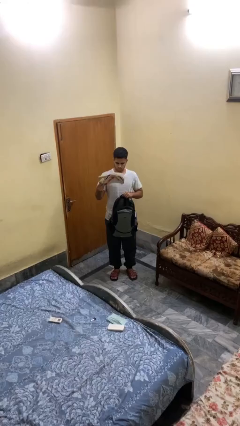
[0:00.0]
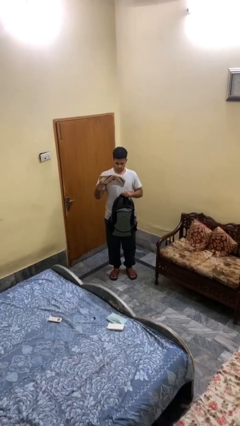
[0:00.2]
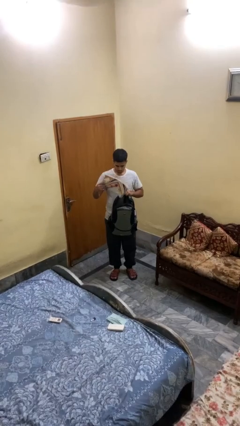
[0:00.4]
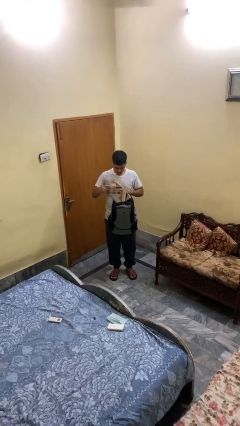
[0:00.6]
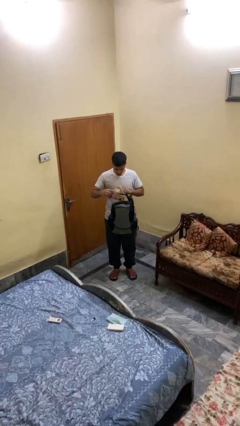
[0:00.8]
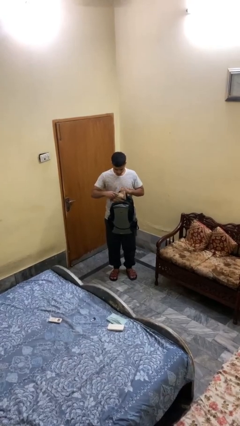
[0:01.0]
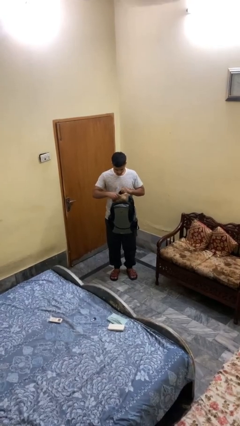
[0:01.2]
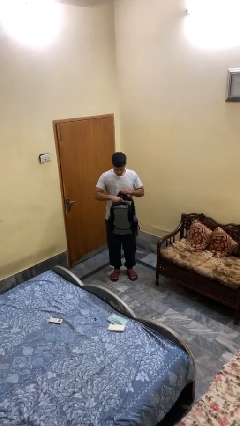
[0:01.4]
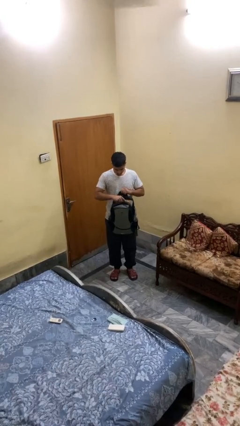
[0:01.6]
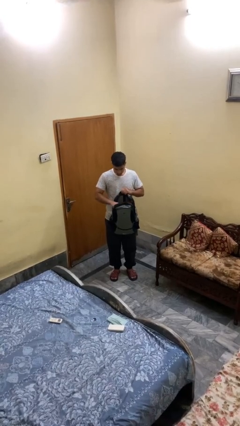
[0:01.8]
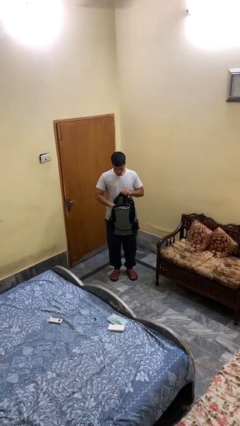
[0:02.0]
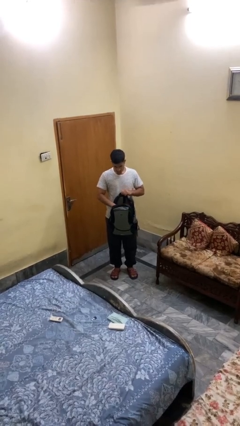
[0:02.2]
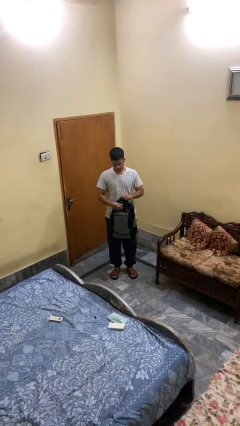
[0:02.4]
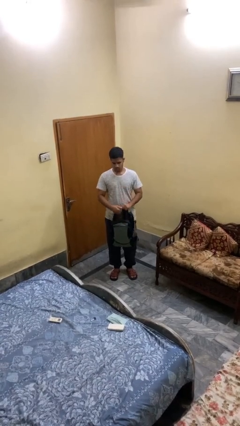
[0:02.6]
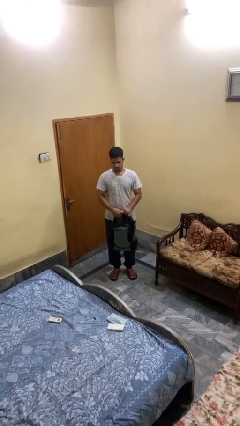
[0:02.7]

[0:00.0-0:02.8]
person puts object into backpack

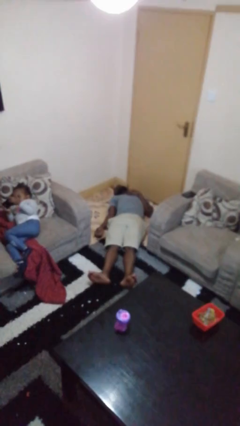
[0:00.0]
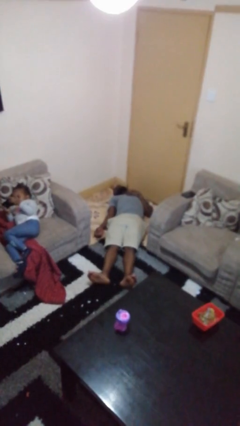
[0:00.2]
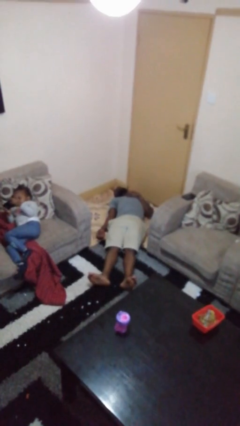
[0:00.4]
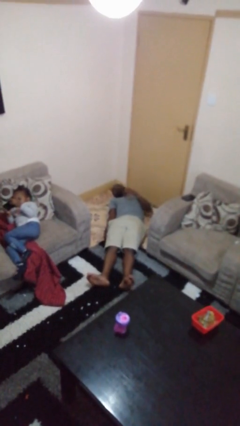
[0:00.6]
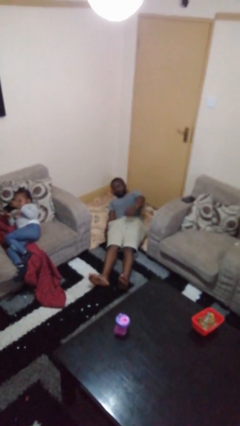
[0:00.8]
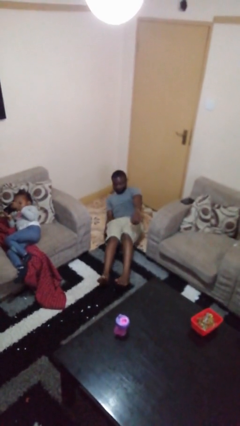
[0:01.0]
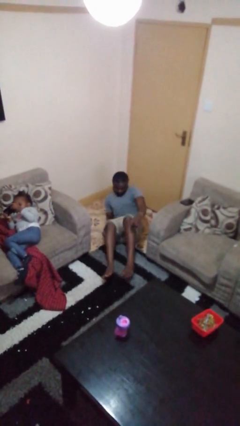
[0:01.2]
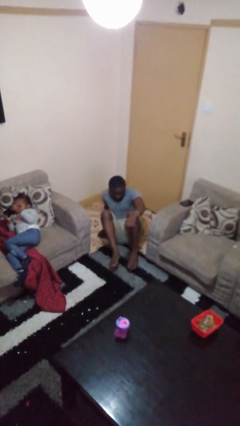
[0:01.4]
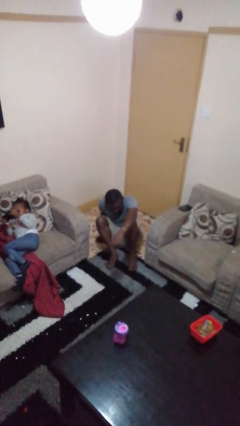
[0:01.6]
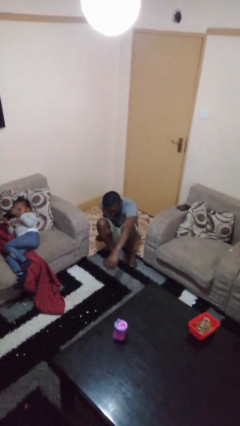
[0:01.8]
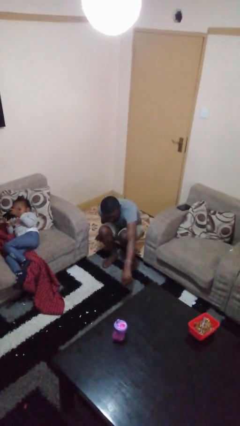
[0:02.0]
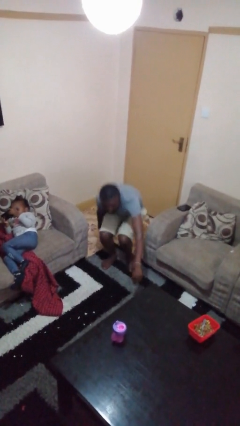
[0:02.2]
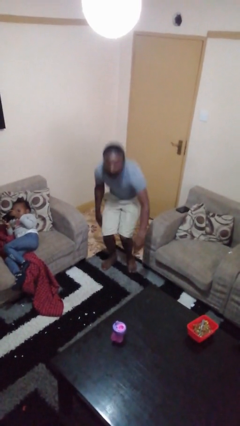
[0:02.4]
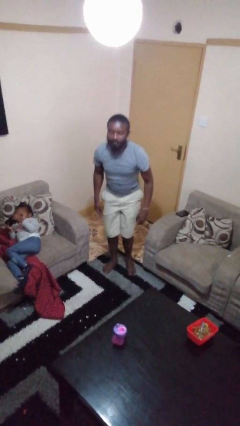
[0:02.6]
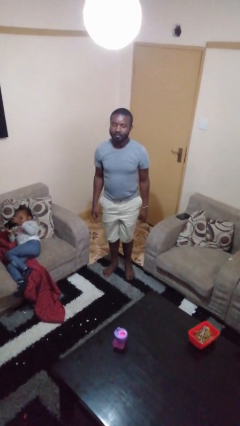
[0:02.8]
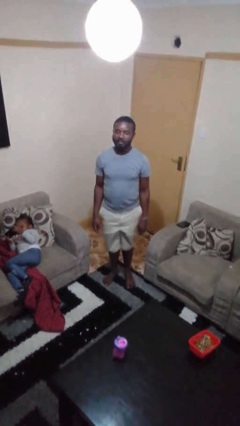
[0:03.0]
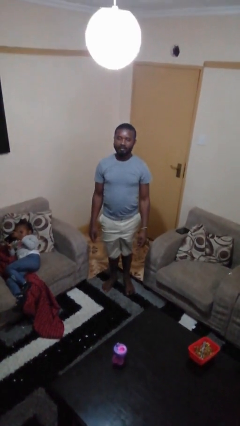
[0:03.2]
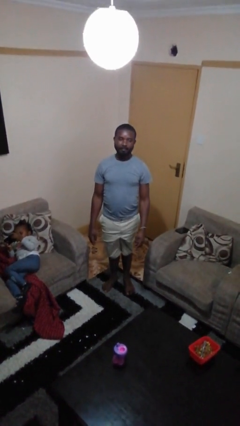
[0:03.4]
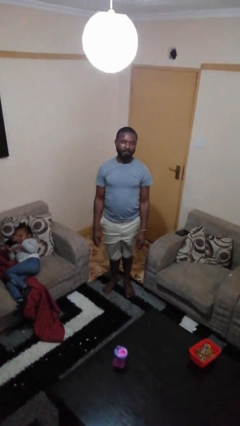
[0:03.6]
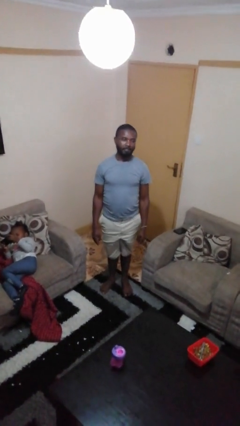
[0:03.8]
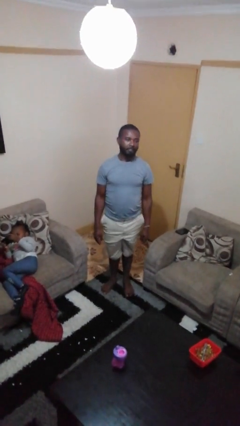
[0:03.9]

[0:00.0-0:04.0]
person stands up from floor

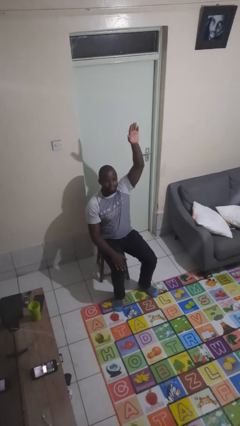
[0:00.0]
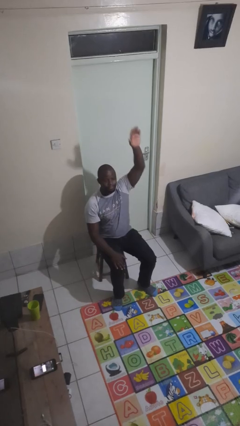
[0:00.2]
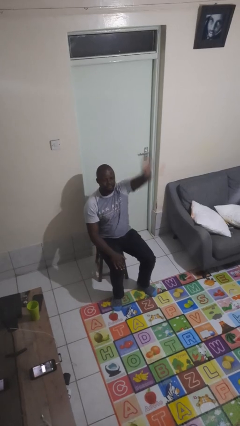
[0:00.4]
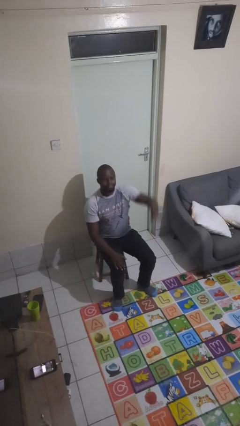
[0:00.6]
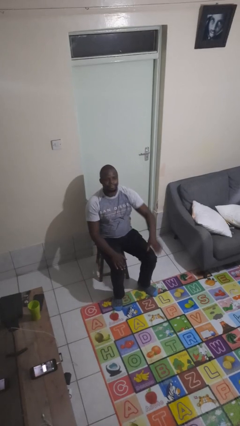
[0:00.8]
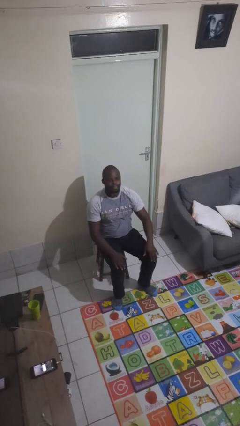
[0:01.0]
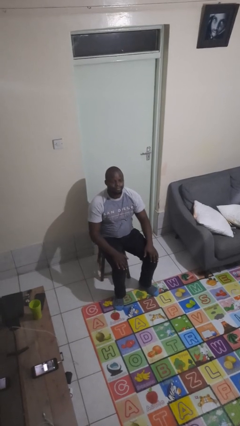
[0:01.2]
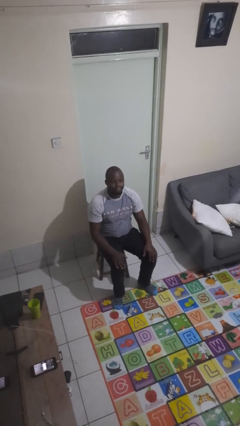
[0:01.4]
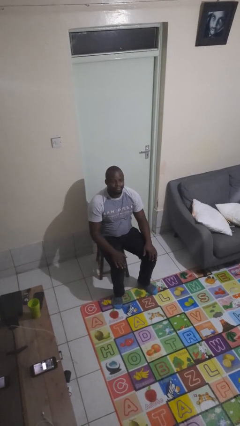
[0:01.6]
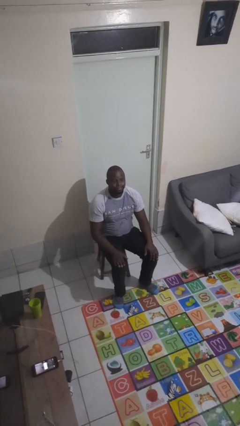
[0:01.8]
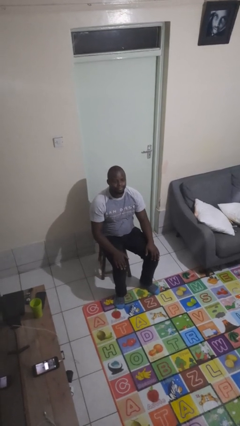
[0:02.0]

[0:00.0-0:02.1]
person gestures lower hand

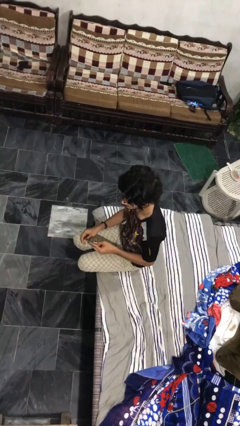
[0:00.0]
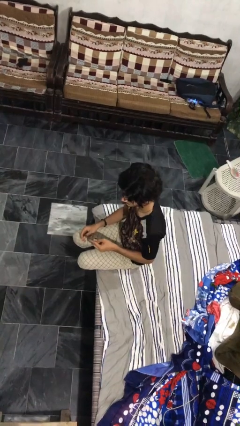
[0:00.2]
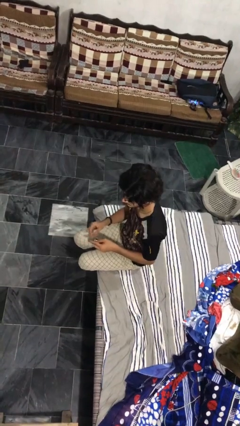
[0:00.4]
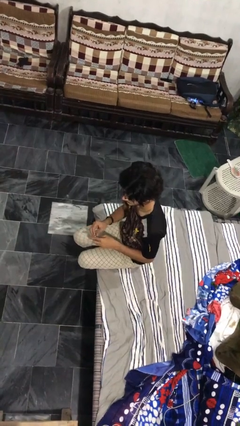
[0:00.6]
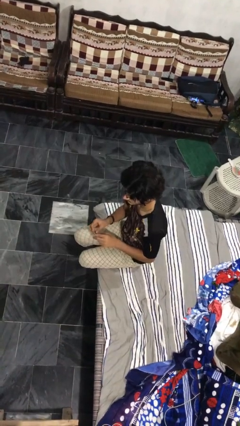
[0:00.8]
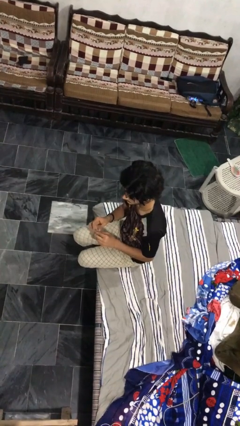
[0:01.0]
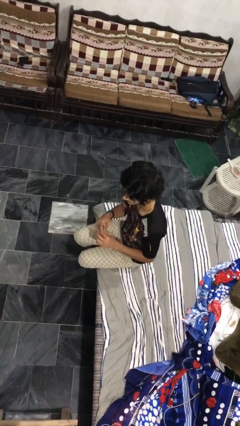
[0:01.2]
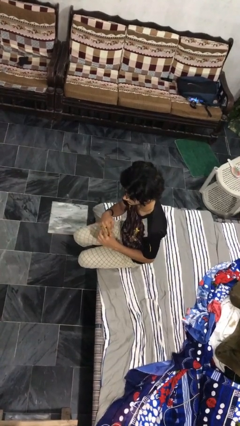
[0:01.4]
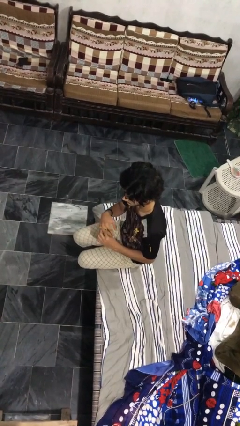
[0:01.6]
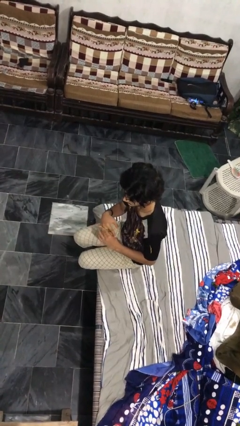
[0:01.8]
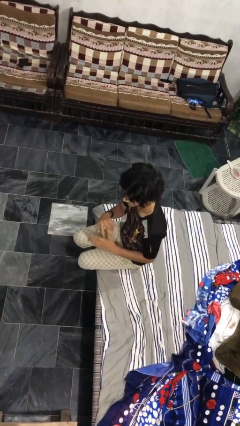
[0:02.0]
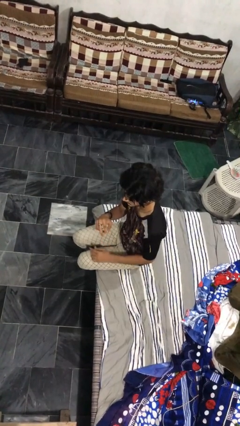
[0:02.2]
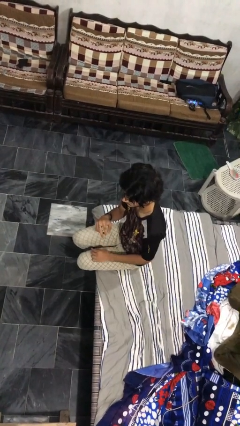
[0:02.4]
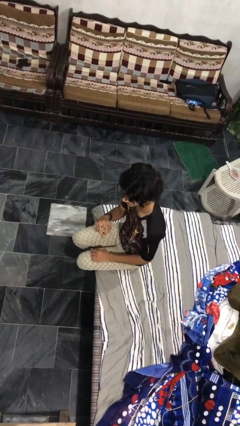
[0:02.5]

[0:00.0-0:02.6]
person puts on ring

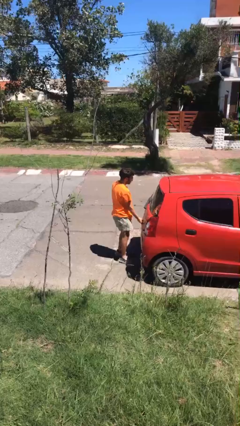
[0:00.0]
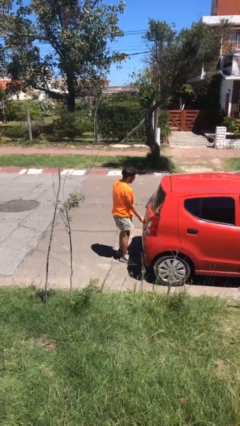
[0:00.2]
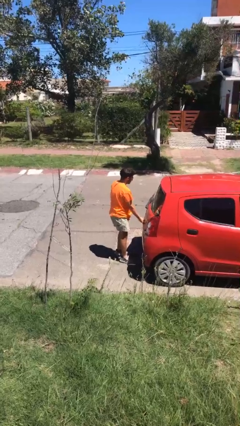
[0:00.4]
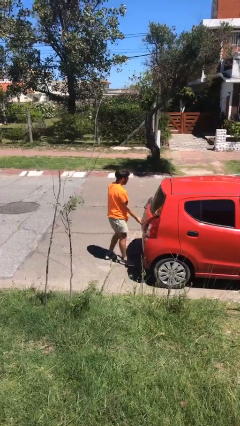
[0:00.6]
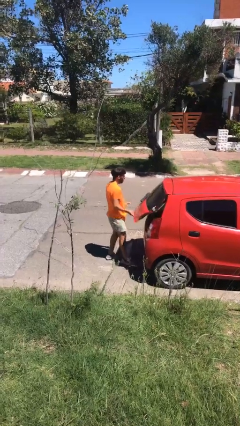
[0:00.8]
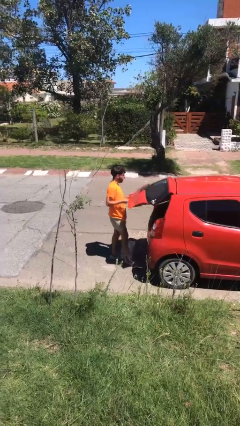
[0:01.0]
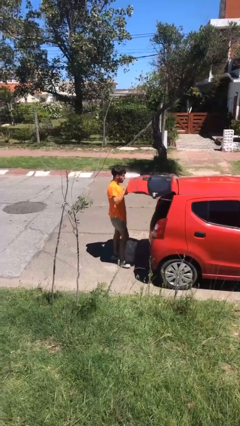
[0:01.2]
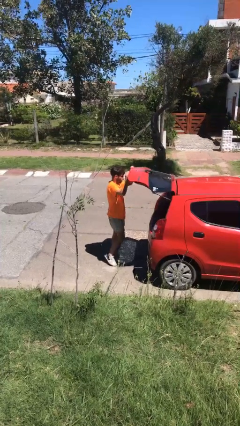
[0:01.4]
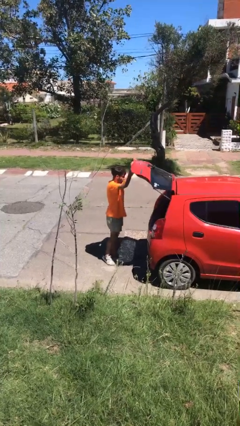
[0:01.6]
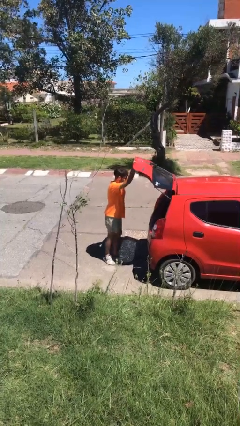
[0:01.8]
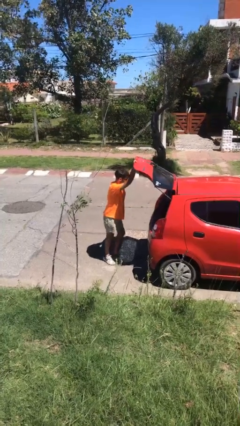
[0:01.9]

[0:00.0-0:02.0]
person opens car trunk

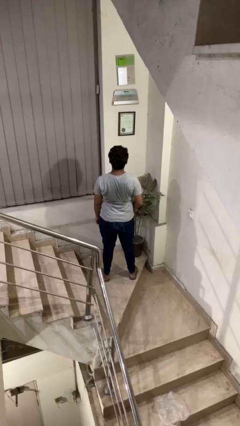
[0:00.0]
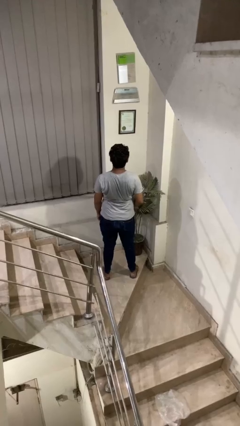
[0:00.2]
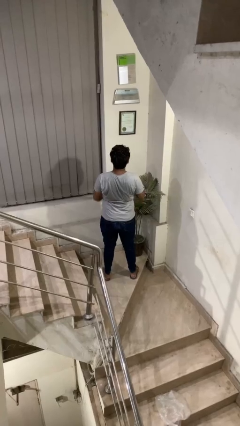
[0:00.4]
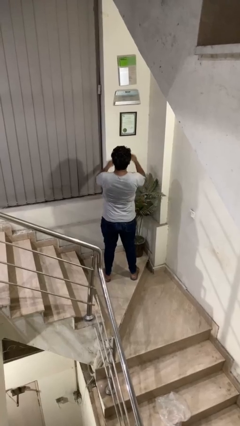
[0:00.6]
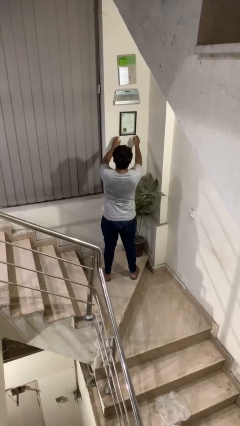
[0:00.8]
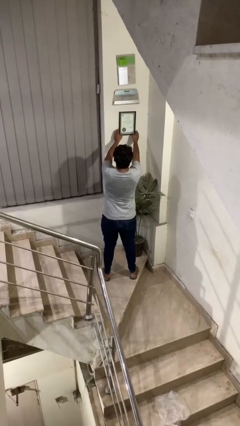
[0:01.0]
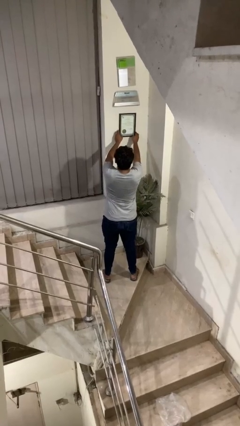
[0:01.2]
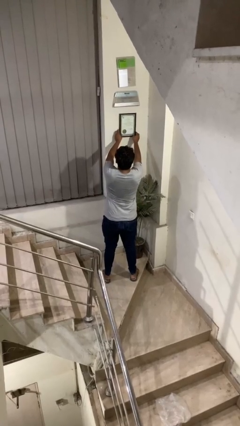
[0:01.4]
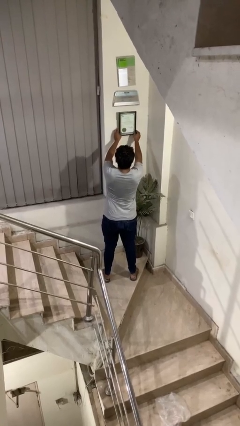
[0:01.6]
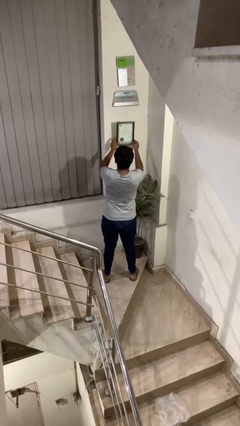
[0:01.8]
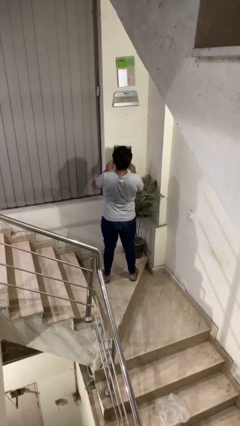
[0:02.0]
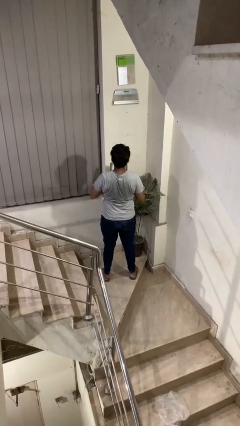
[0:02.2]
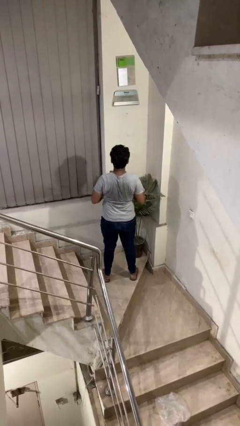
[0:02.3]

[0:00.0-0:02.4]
person takes down picture frame

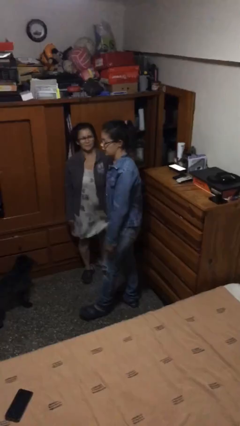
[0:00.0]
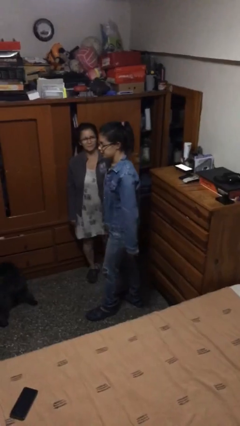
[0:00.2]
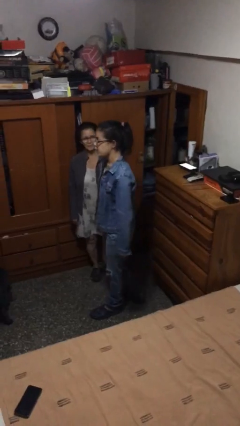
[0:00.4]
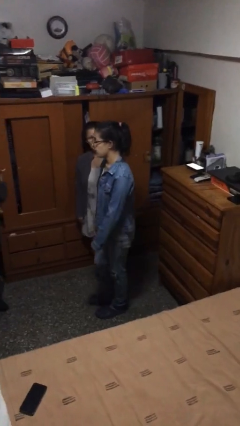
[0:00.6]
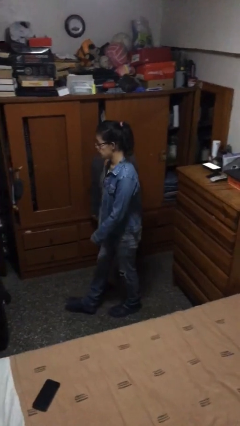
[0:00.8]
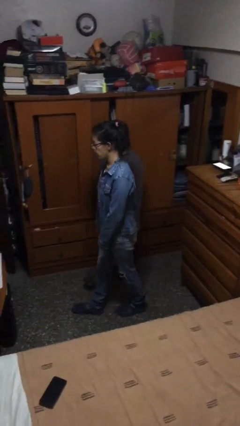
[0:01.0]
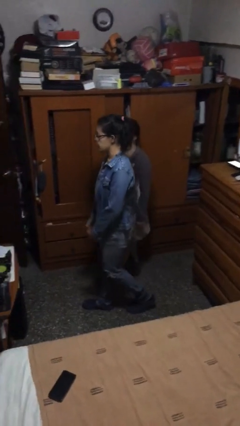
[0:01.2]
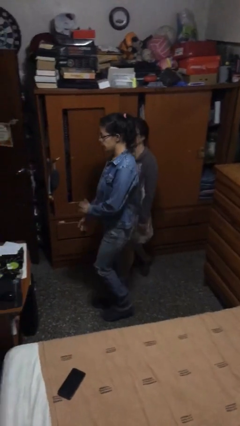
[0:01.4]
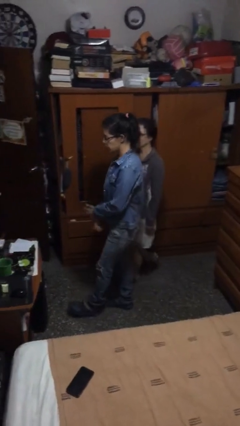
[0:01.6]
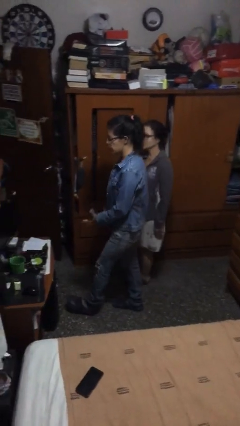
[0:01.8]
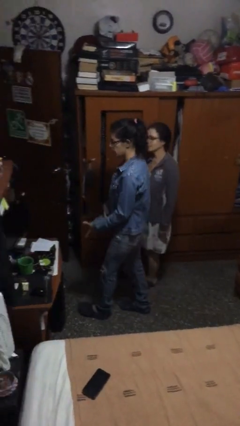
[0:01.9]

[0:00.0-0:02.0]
person talks to person
